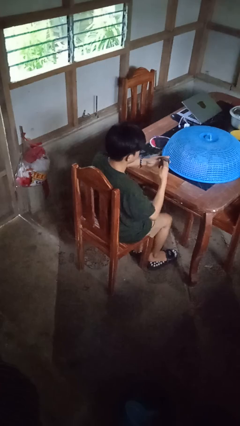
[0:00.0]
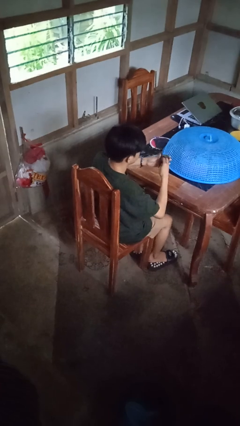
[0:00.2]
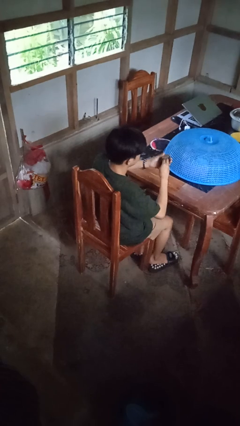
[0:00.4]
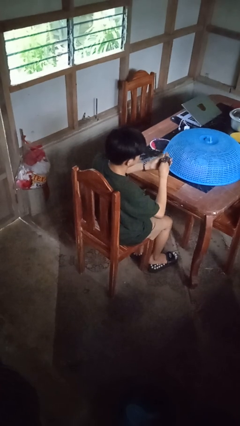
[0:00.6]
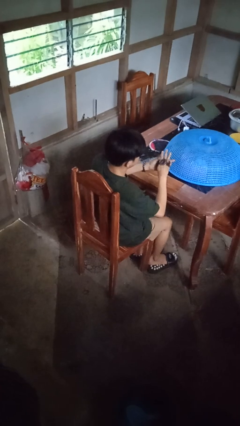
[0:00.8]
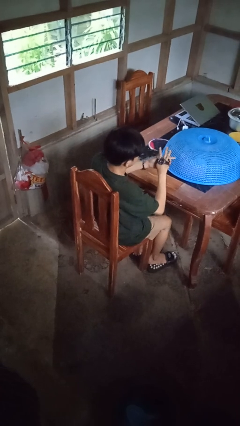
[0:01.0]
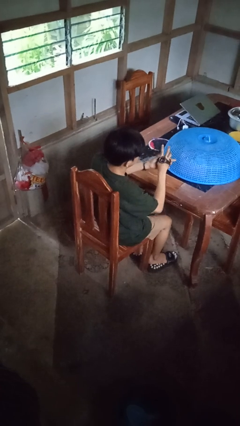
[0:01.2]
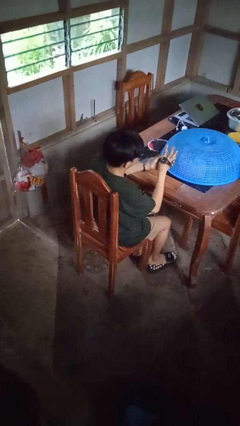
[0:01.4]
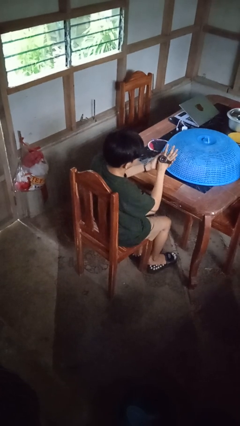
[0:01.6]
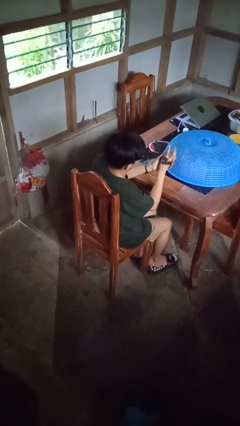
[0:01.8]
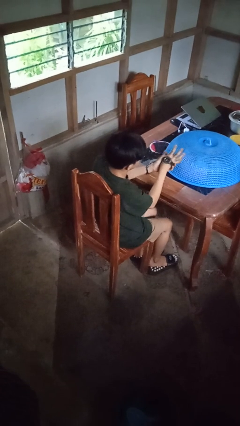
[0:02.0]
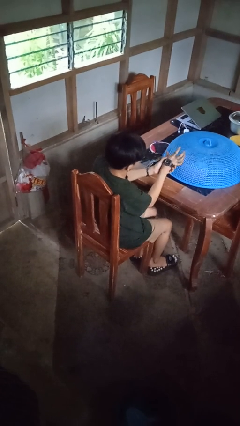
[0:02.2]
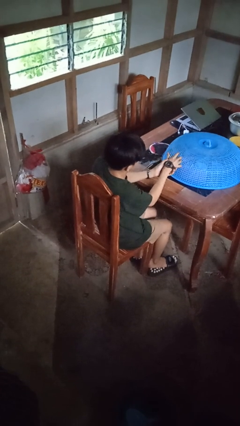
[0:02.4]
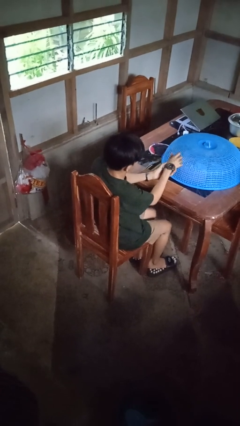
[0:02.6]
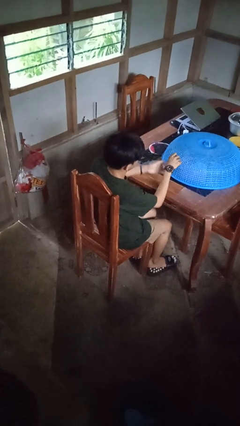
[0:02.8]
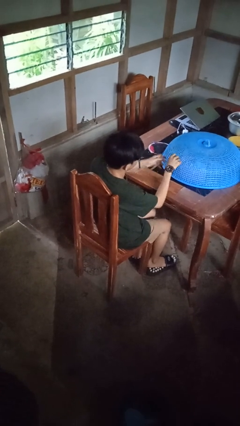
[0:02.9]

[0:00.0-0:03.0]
person puts on wristwatch

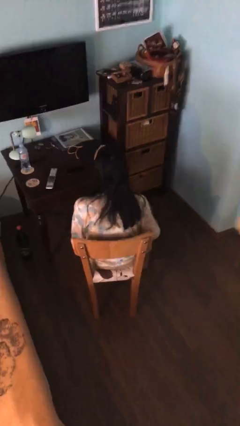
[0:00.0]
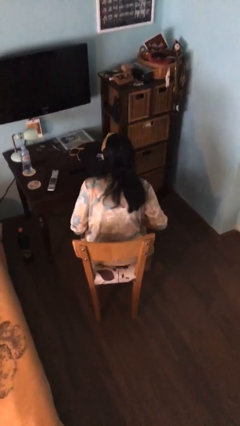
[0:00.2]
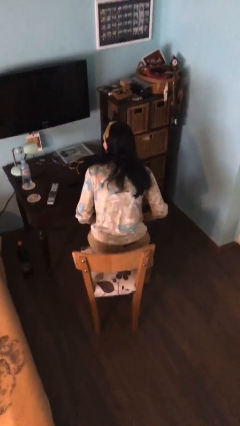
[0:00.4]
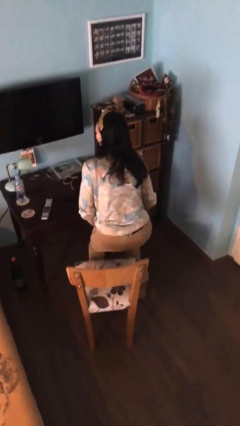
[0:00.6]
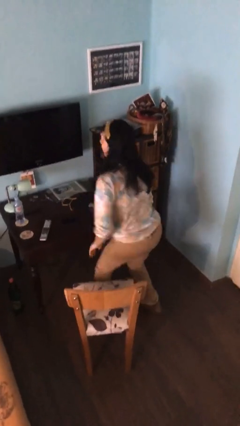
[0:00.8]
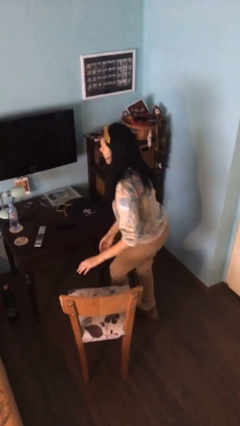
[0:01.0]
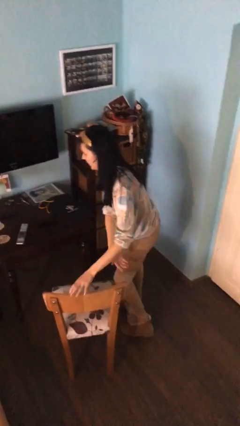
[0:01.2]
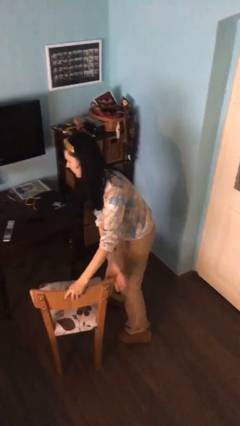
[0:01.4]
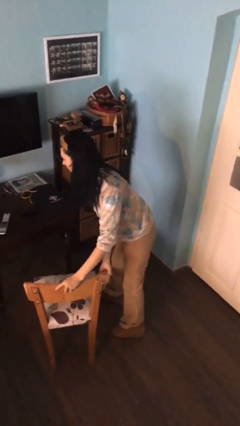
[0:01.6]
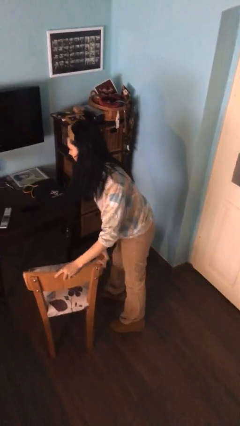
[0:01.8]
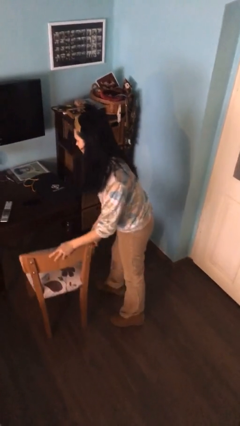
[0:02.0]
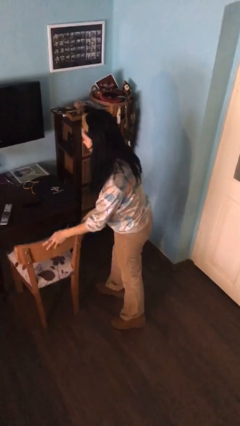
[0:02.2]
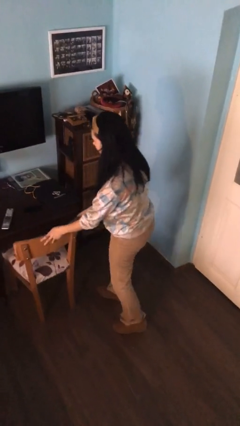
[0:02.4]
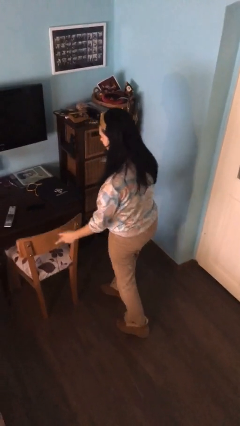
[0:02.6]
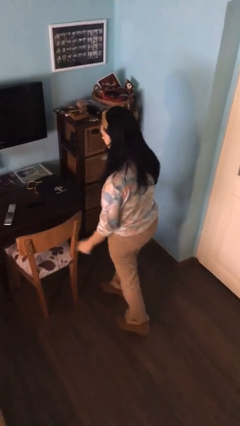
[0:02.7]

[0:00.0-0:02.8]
person stands up

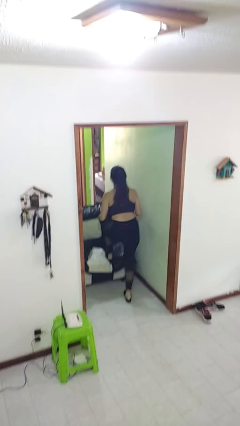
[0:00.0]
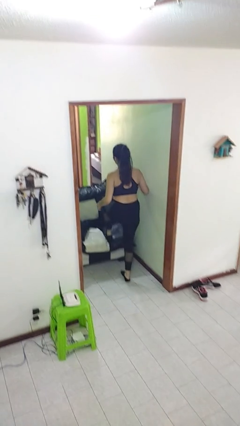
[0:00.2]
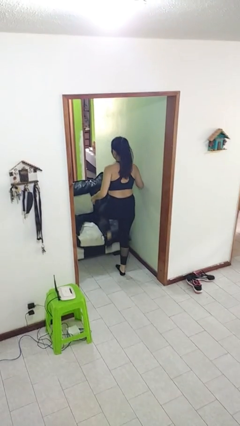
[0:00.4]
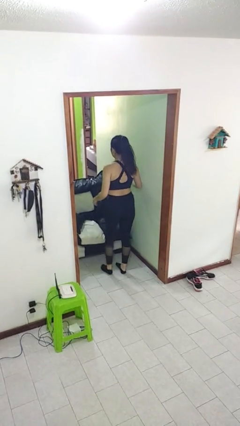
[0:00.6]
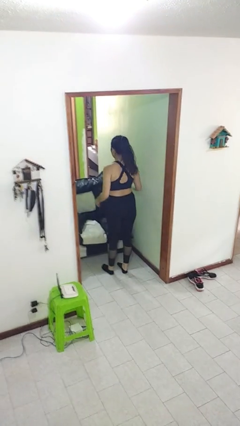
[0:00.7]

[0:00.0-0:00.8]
person climbs off couch

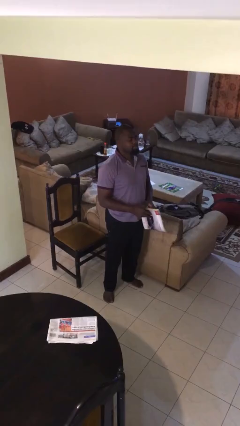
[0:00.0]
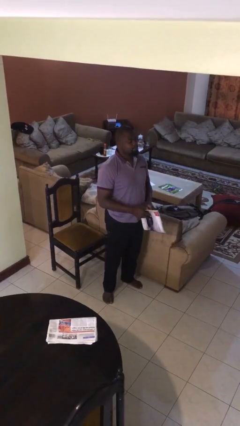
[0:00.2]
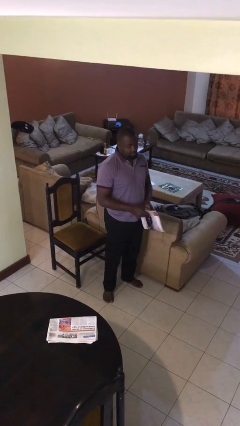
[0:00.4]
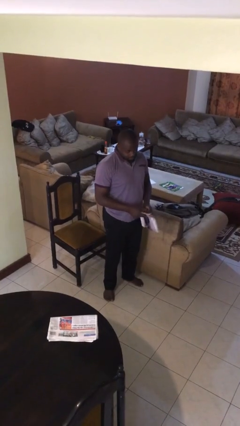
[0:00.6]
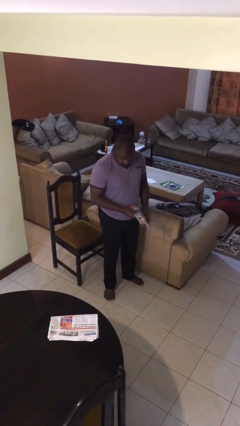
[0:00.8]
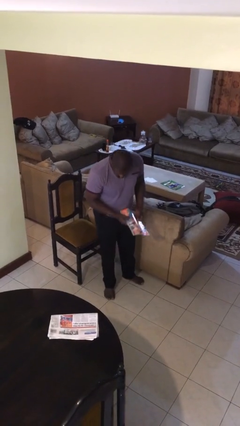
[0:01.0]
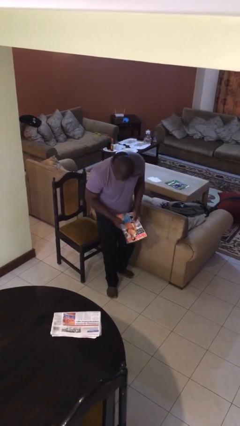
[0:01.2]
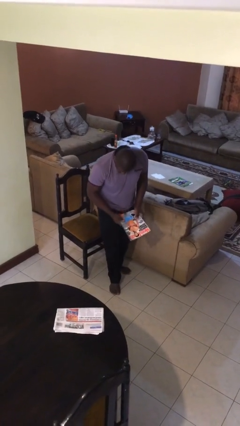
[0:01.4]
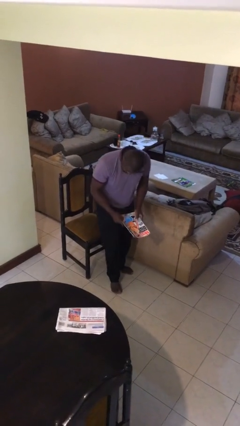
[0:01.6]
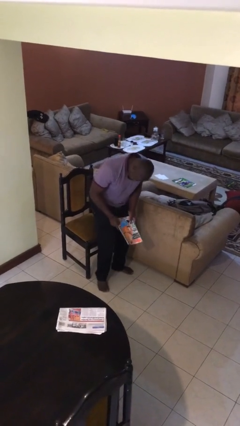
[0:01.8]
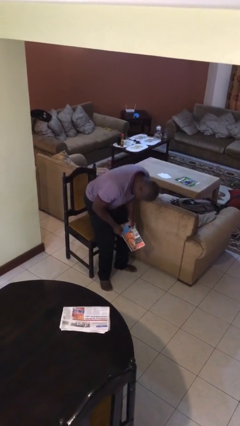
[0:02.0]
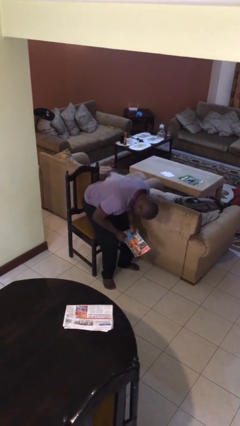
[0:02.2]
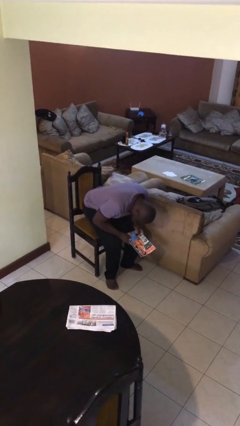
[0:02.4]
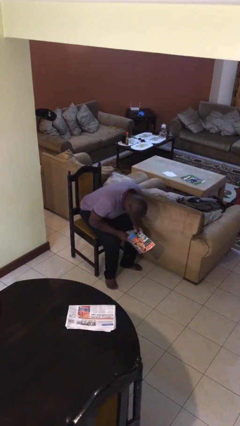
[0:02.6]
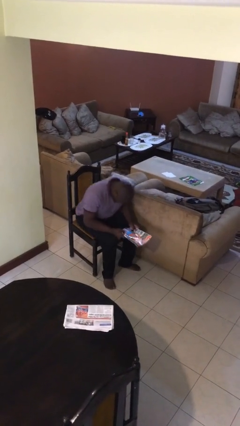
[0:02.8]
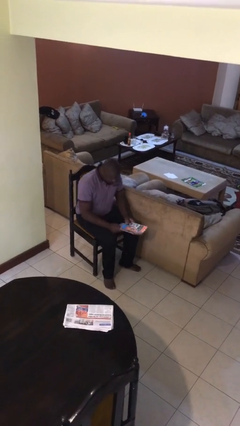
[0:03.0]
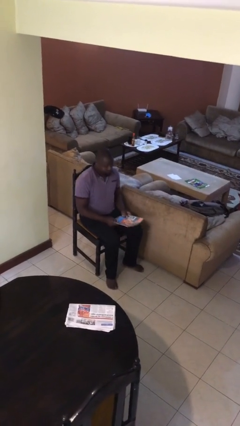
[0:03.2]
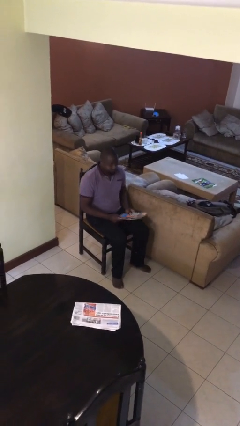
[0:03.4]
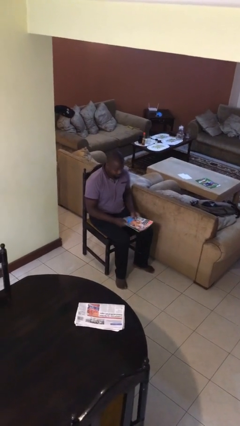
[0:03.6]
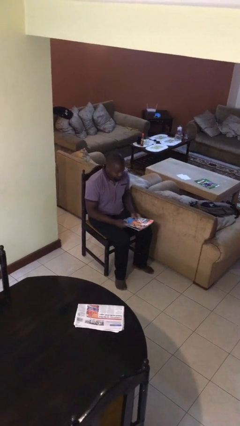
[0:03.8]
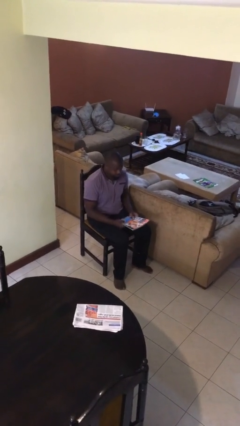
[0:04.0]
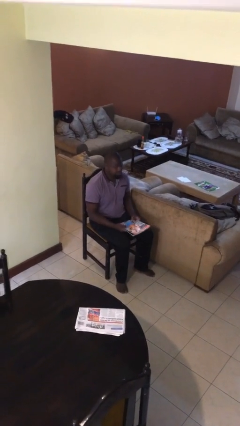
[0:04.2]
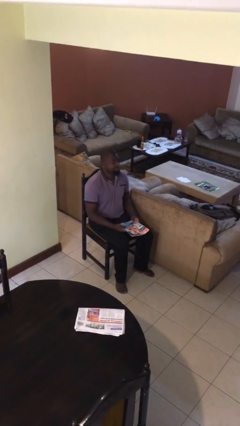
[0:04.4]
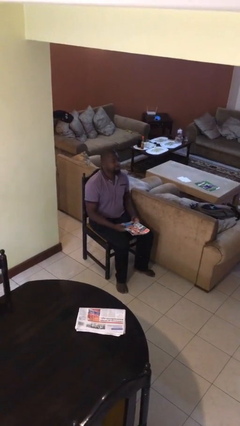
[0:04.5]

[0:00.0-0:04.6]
person sits down

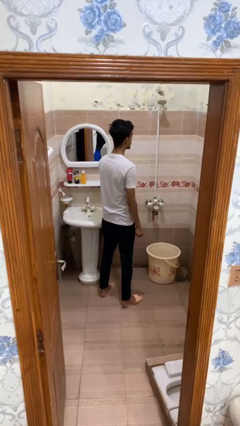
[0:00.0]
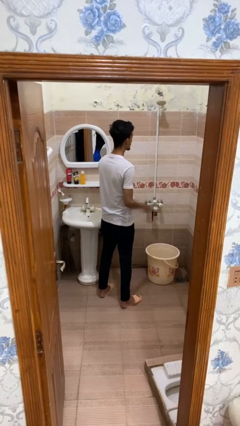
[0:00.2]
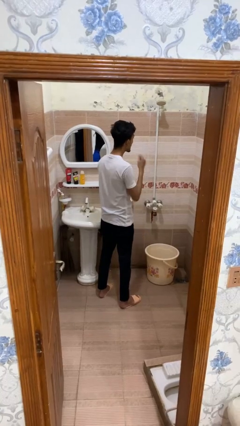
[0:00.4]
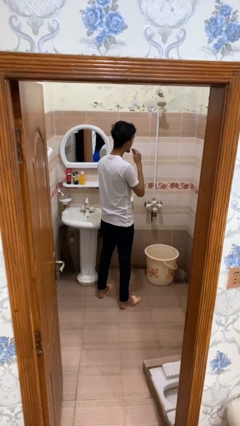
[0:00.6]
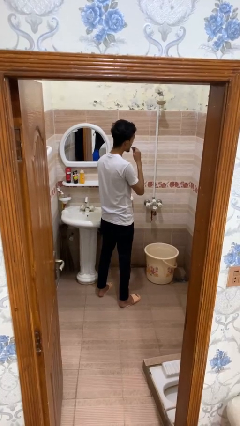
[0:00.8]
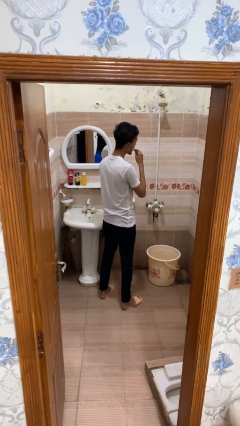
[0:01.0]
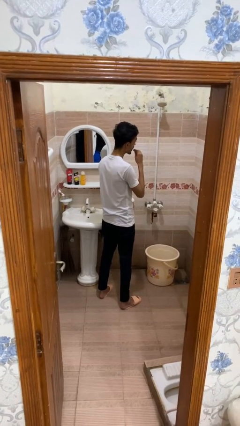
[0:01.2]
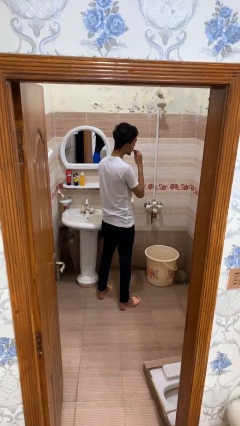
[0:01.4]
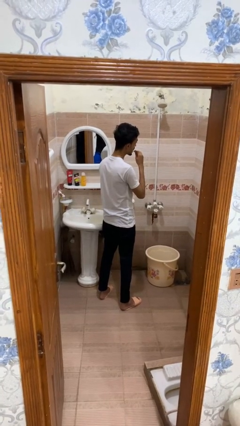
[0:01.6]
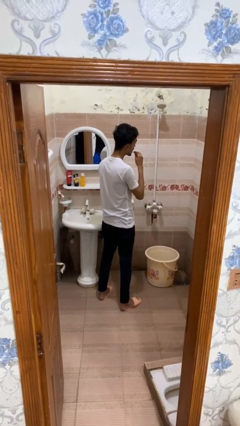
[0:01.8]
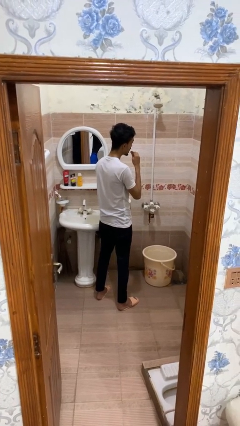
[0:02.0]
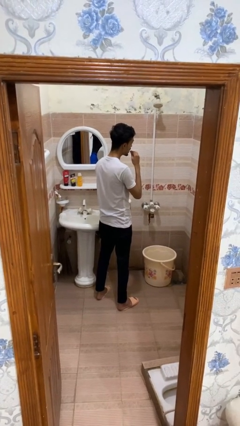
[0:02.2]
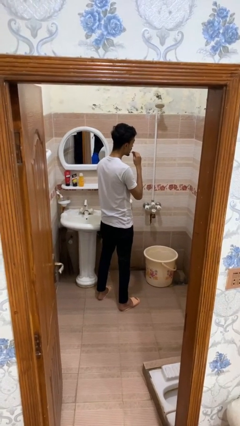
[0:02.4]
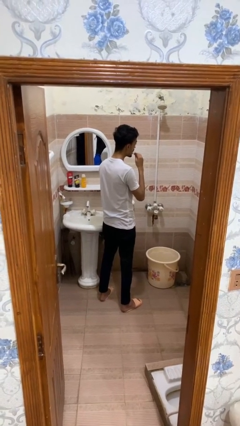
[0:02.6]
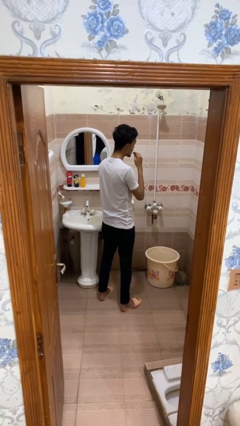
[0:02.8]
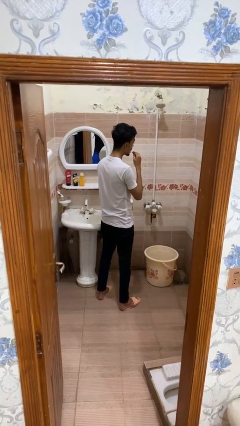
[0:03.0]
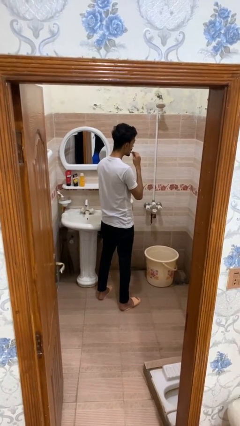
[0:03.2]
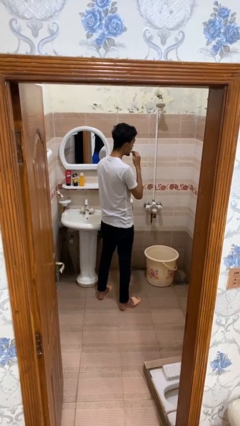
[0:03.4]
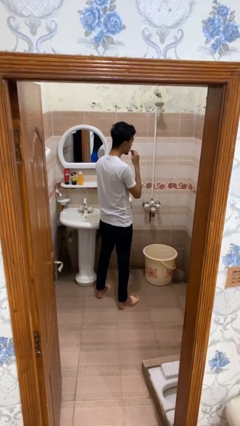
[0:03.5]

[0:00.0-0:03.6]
person flosses

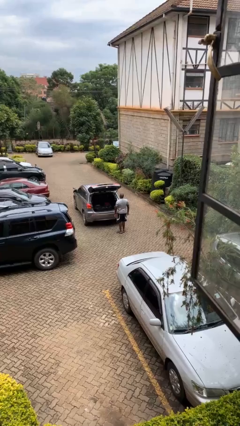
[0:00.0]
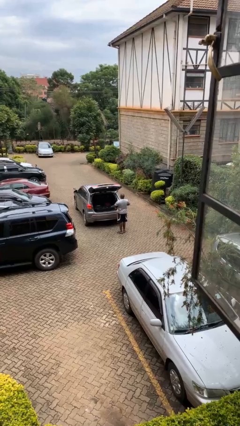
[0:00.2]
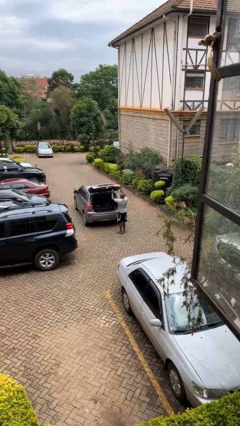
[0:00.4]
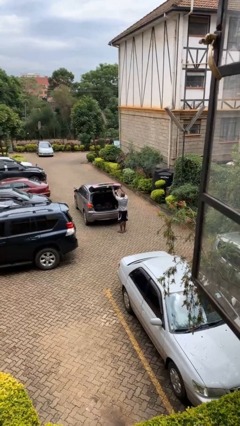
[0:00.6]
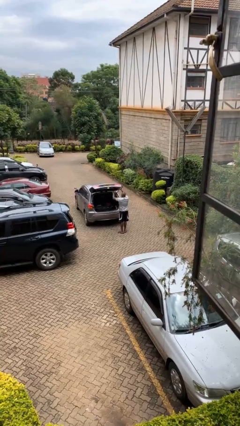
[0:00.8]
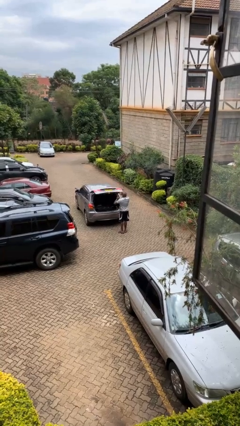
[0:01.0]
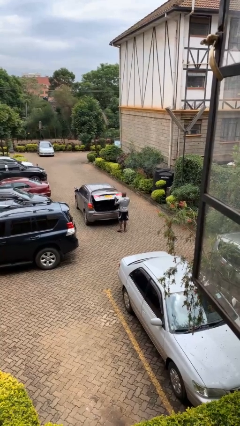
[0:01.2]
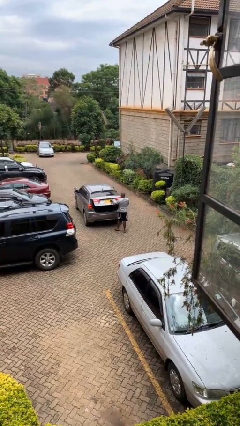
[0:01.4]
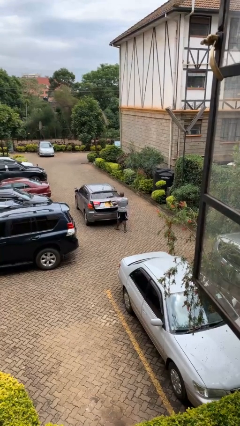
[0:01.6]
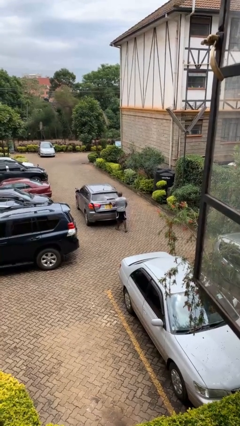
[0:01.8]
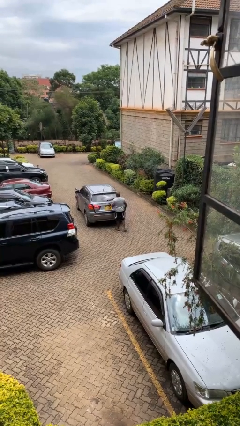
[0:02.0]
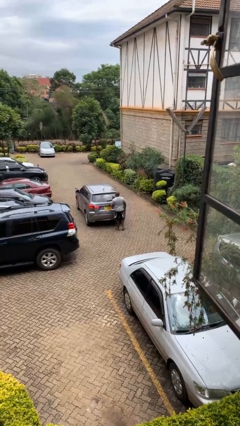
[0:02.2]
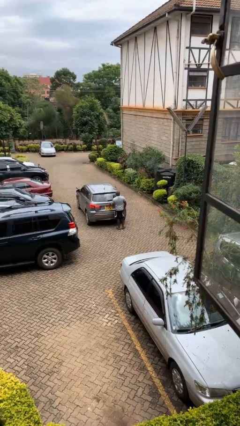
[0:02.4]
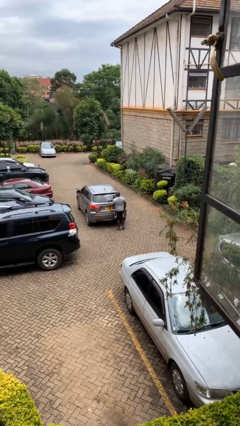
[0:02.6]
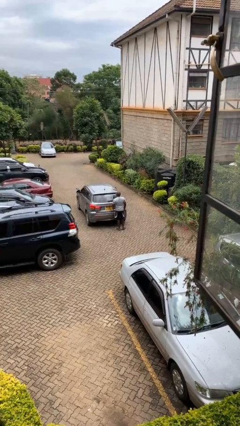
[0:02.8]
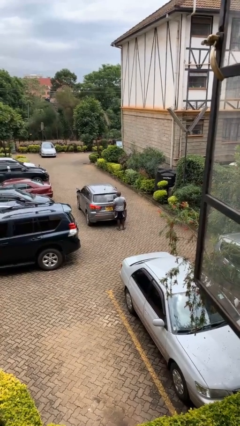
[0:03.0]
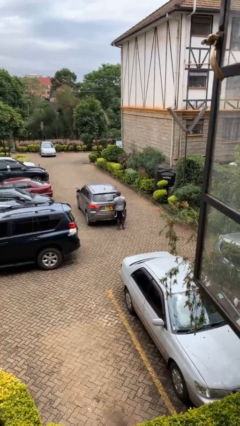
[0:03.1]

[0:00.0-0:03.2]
person closes car trunk
